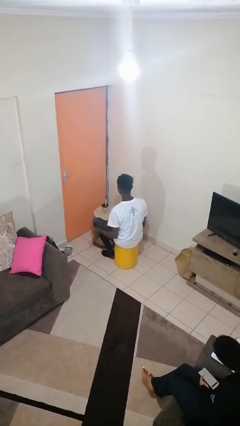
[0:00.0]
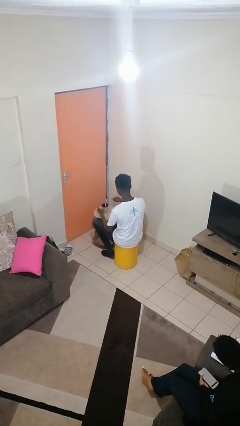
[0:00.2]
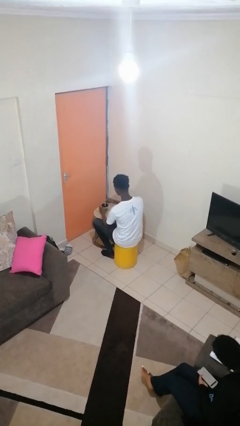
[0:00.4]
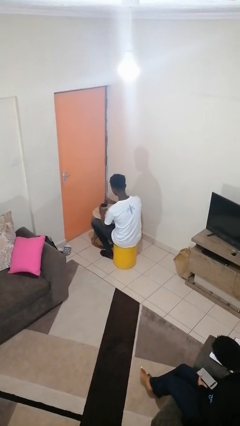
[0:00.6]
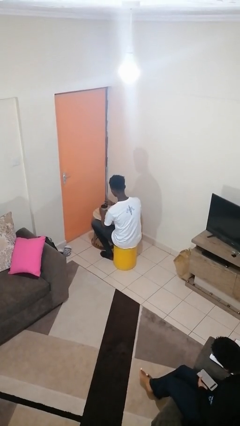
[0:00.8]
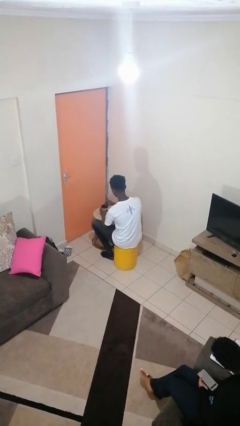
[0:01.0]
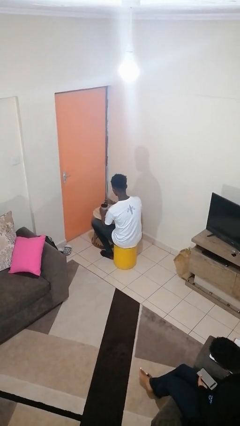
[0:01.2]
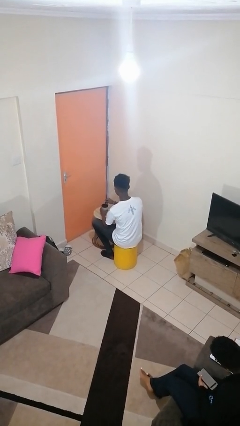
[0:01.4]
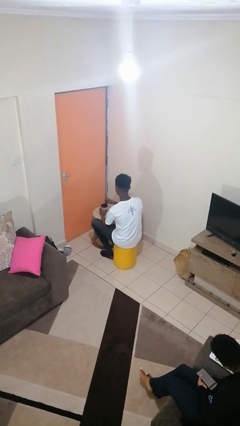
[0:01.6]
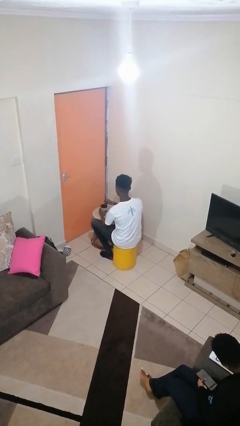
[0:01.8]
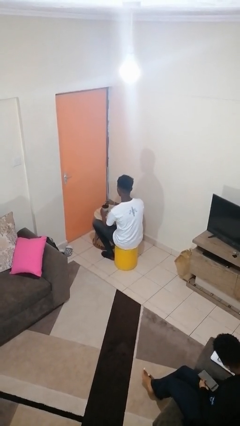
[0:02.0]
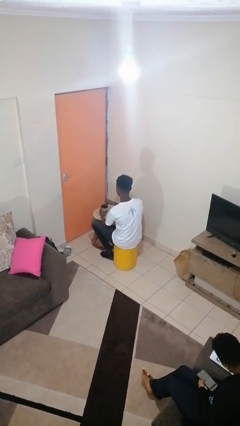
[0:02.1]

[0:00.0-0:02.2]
person stirs mug

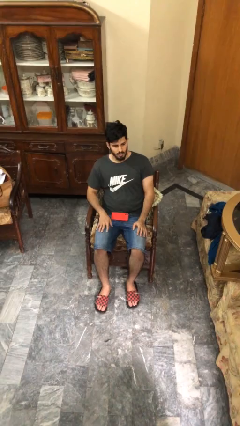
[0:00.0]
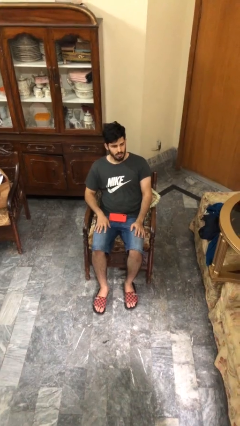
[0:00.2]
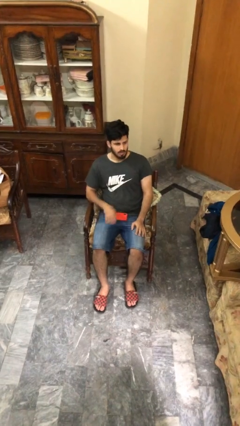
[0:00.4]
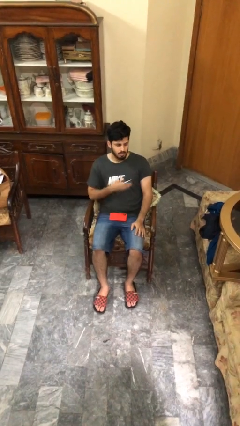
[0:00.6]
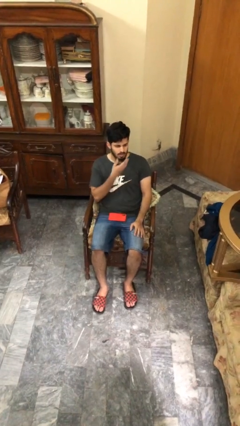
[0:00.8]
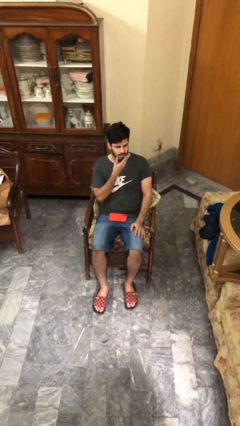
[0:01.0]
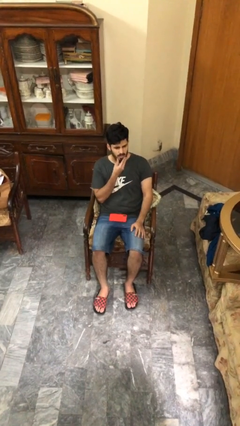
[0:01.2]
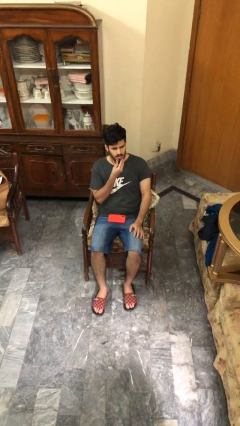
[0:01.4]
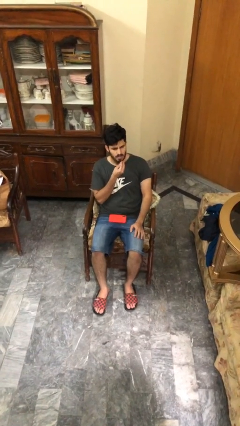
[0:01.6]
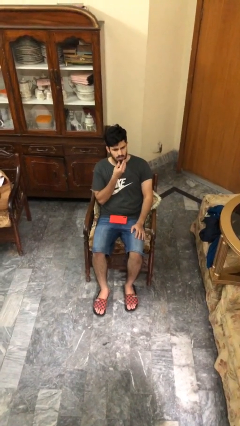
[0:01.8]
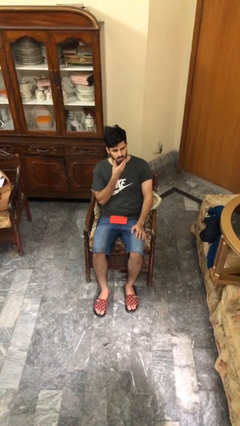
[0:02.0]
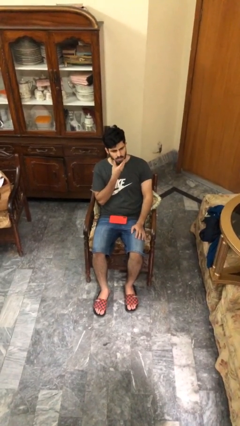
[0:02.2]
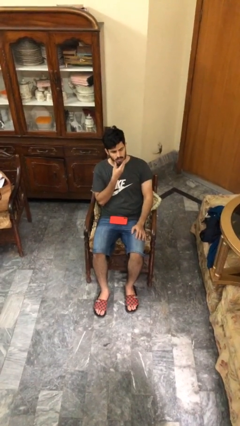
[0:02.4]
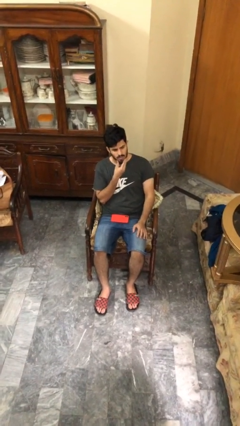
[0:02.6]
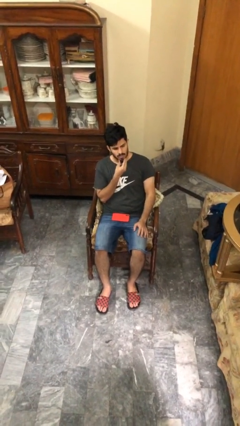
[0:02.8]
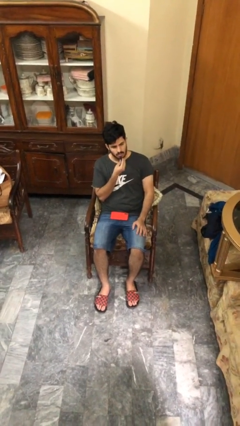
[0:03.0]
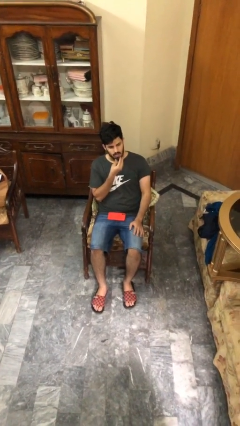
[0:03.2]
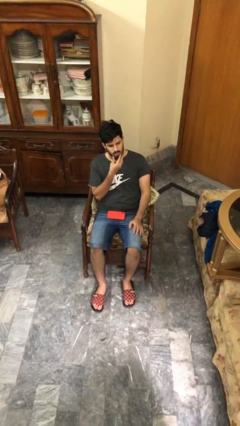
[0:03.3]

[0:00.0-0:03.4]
person strokes chin

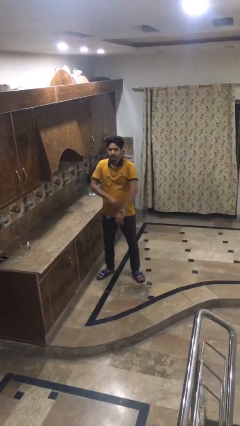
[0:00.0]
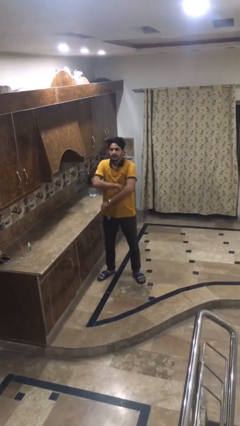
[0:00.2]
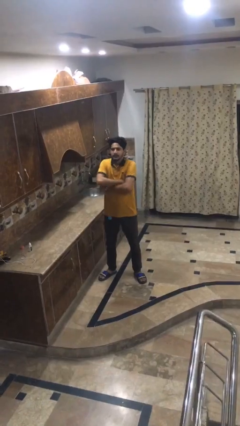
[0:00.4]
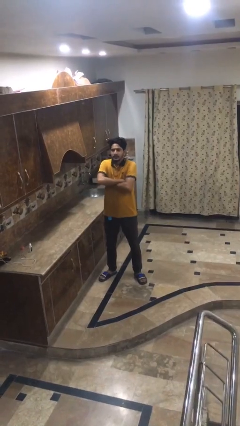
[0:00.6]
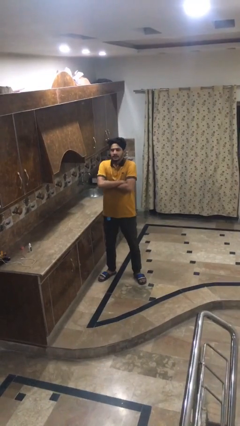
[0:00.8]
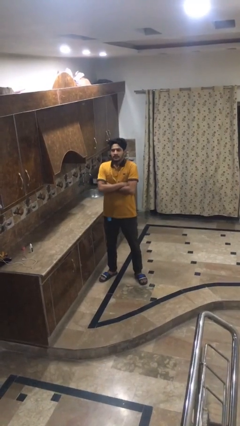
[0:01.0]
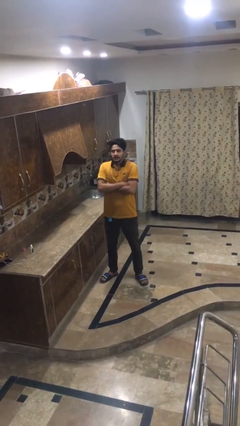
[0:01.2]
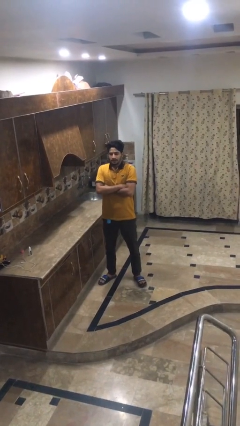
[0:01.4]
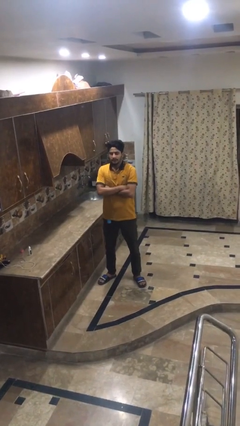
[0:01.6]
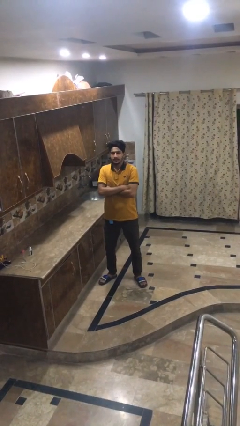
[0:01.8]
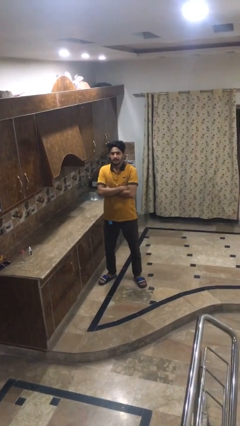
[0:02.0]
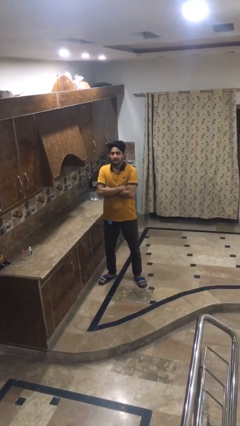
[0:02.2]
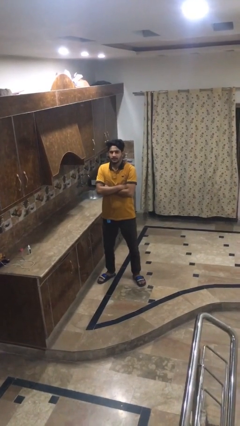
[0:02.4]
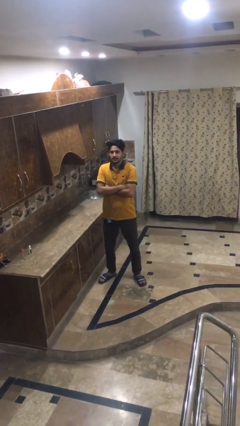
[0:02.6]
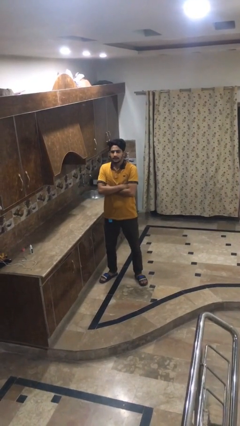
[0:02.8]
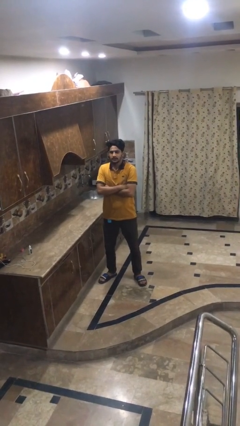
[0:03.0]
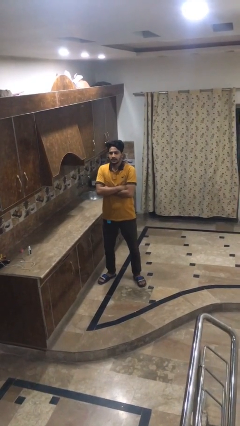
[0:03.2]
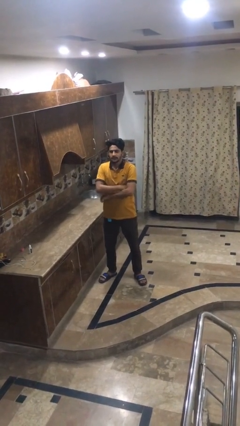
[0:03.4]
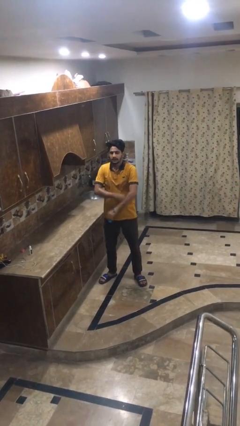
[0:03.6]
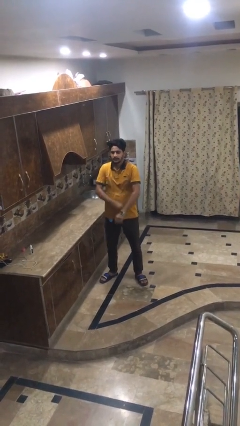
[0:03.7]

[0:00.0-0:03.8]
person crosses arms

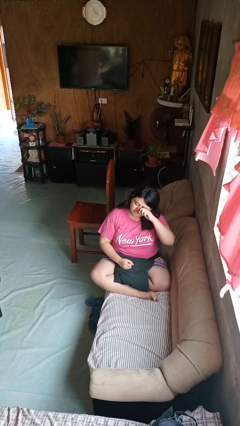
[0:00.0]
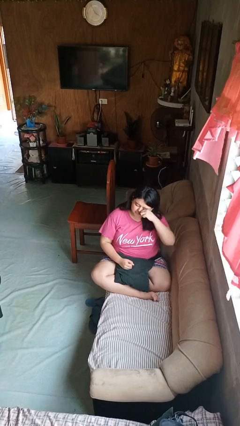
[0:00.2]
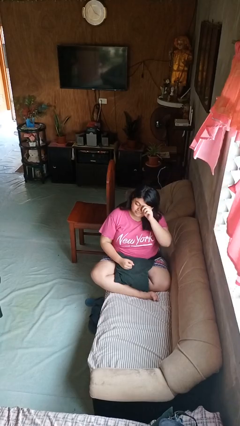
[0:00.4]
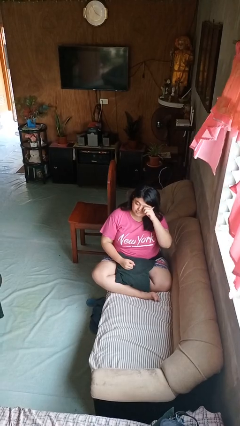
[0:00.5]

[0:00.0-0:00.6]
person rubs eyes

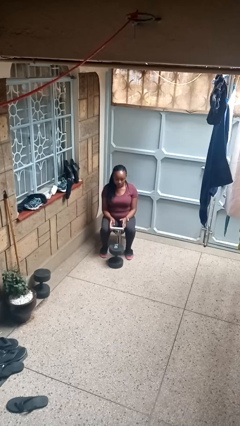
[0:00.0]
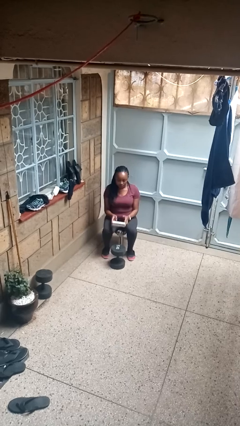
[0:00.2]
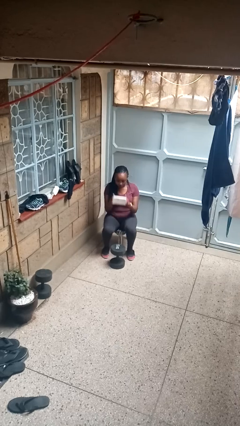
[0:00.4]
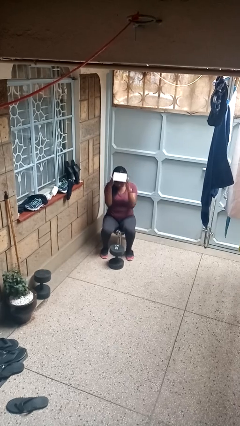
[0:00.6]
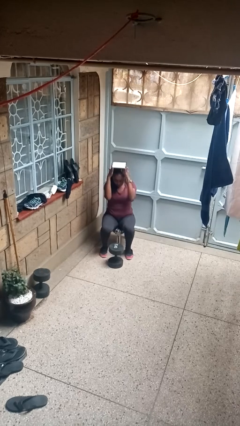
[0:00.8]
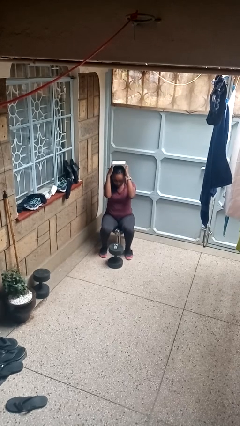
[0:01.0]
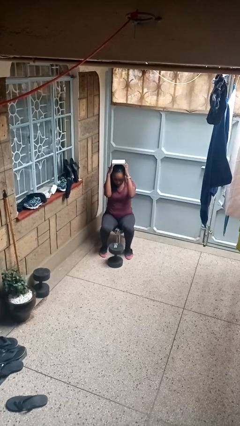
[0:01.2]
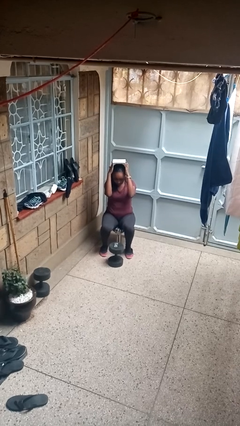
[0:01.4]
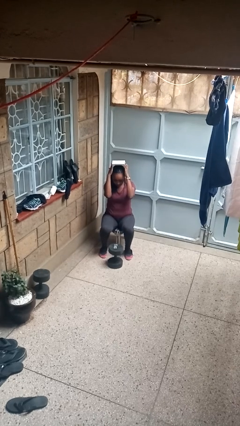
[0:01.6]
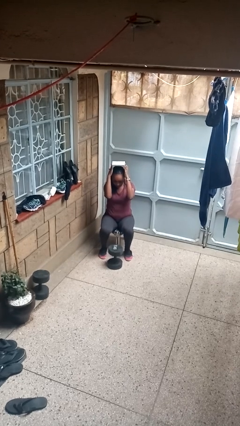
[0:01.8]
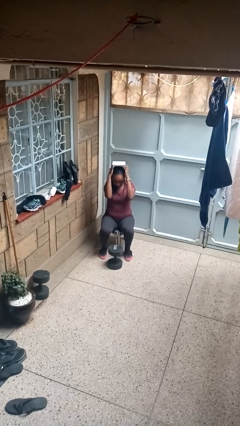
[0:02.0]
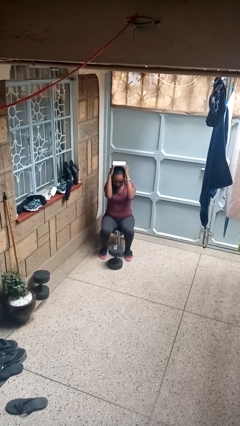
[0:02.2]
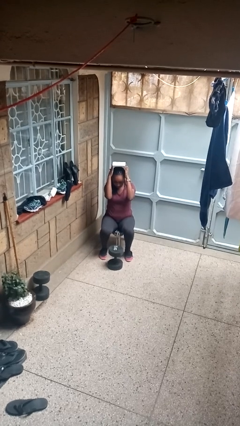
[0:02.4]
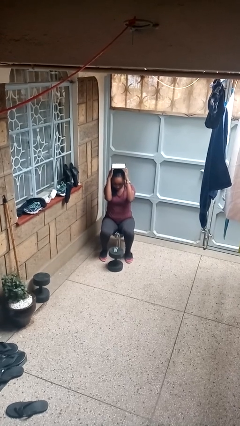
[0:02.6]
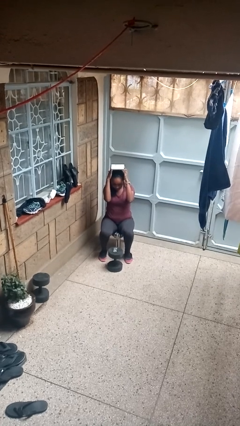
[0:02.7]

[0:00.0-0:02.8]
person holds object above head

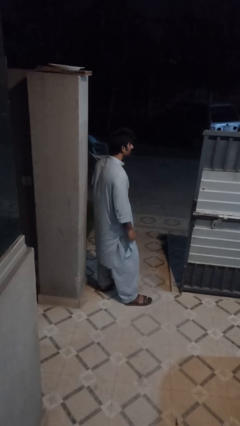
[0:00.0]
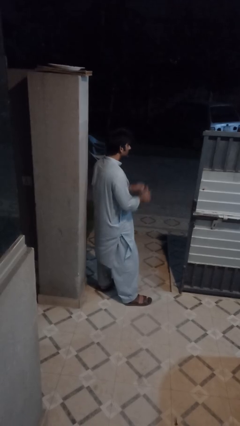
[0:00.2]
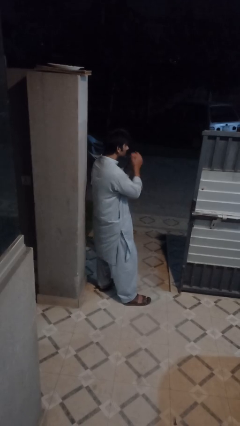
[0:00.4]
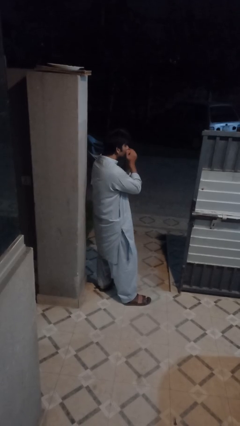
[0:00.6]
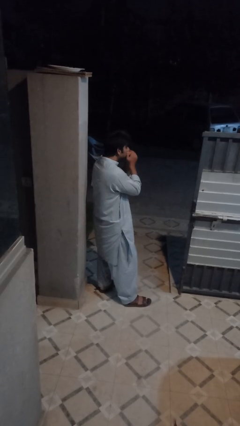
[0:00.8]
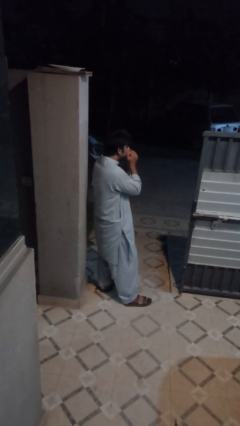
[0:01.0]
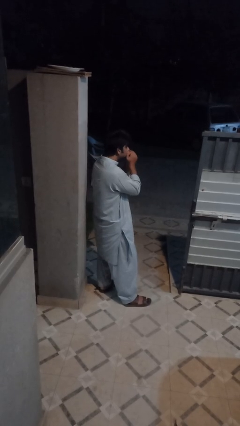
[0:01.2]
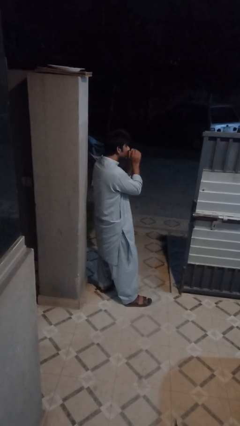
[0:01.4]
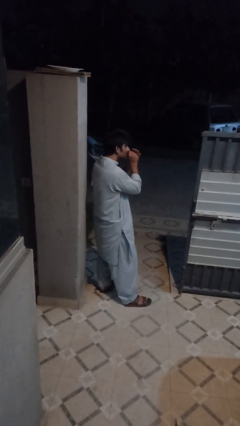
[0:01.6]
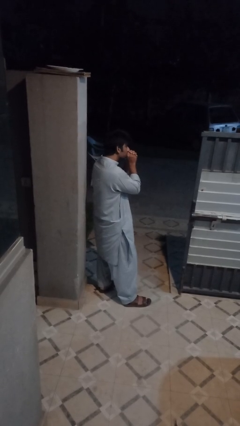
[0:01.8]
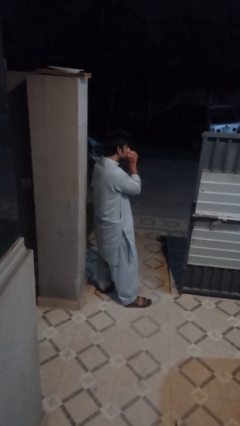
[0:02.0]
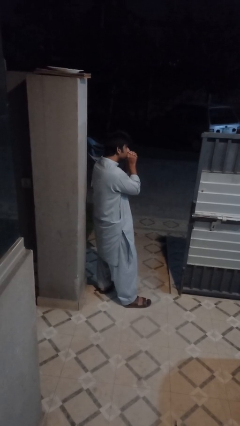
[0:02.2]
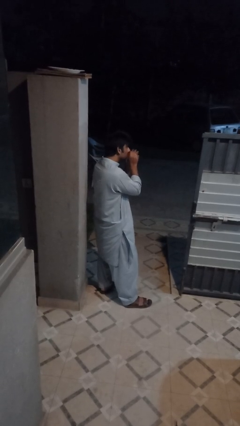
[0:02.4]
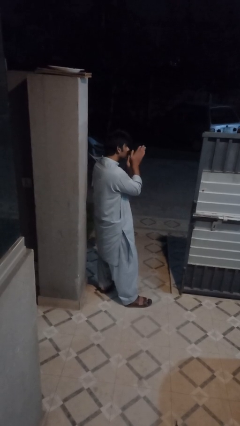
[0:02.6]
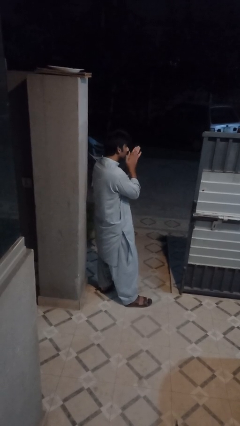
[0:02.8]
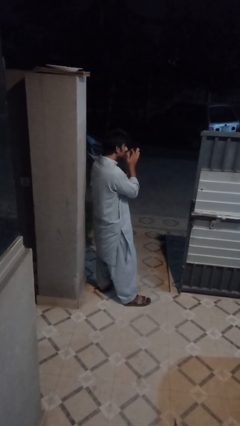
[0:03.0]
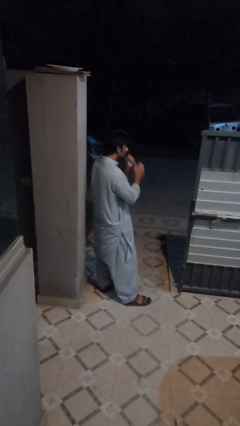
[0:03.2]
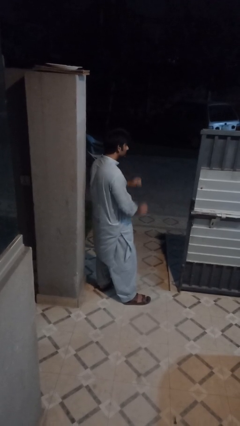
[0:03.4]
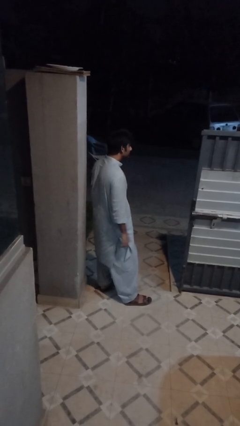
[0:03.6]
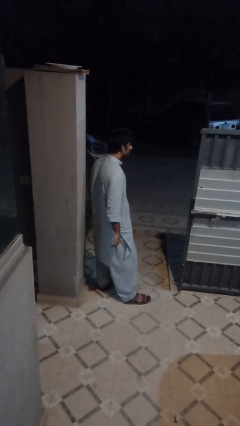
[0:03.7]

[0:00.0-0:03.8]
person blows into hands

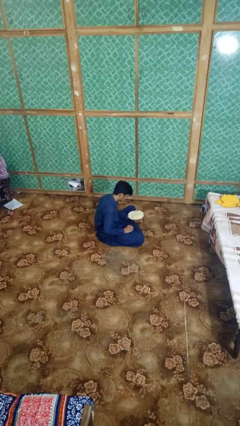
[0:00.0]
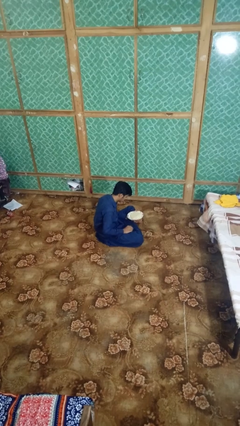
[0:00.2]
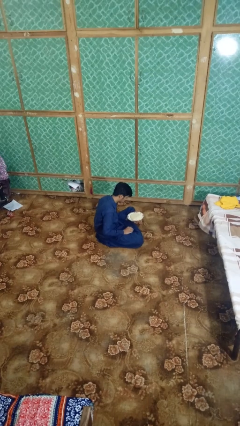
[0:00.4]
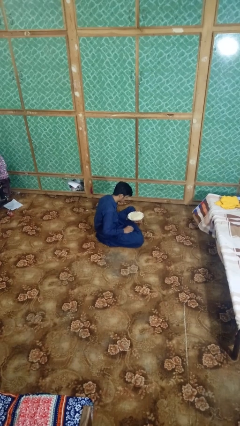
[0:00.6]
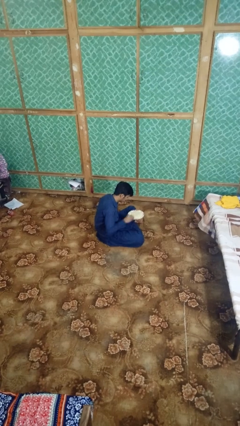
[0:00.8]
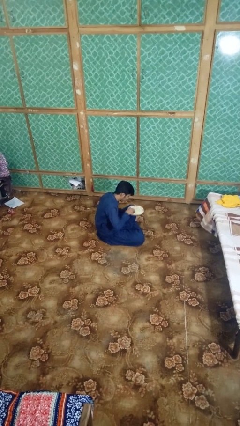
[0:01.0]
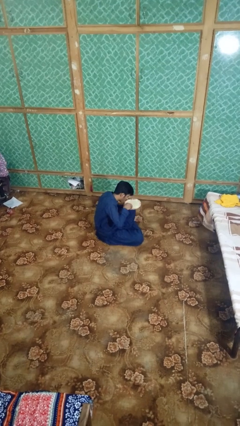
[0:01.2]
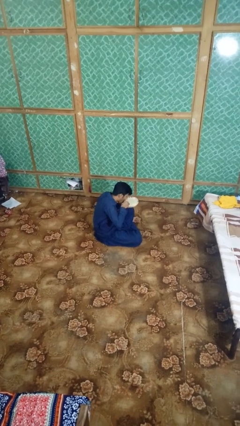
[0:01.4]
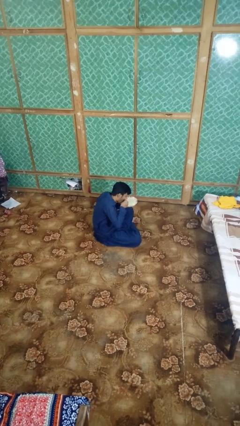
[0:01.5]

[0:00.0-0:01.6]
person eats with hands
